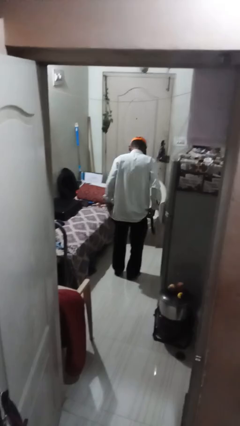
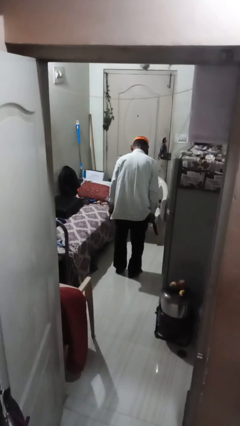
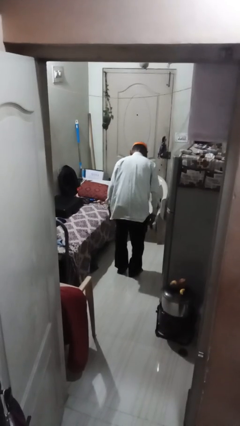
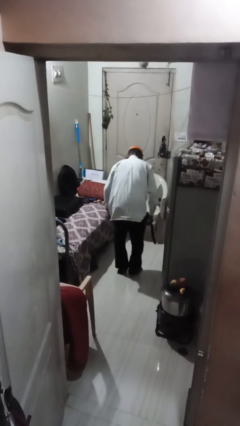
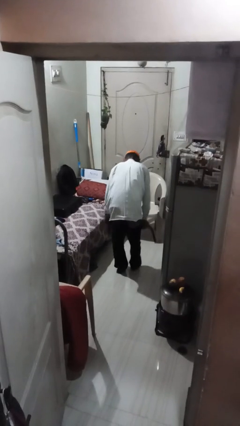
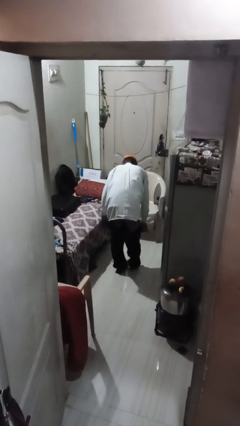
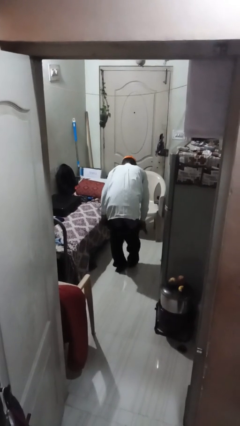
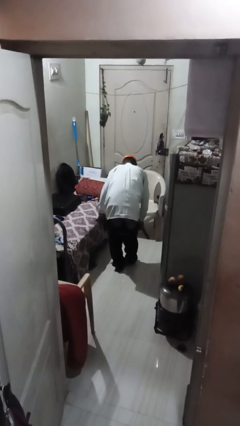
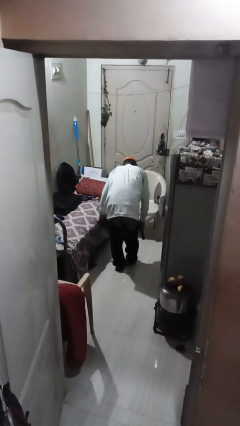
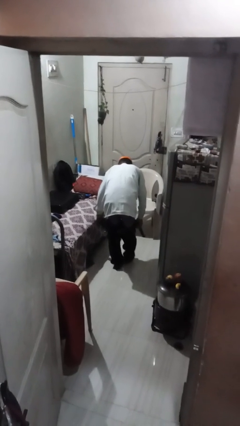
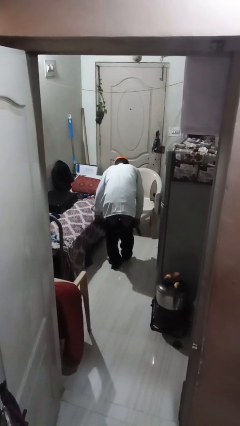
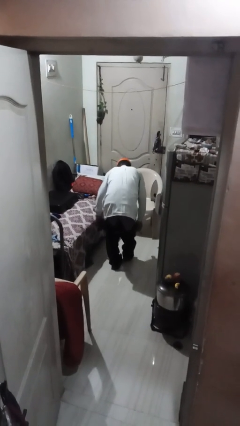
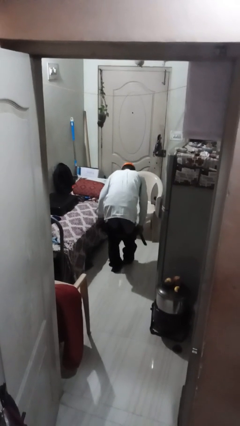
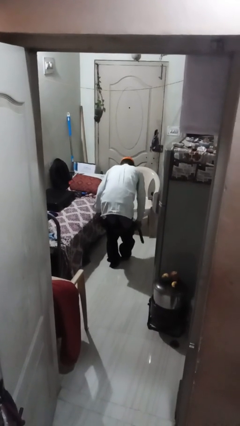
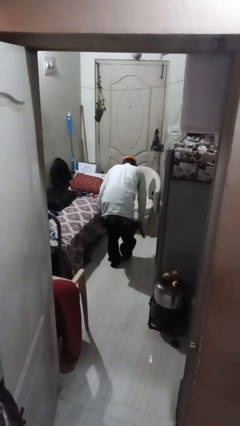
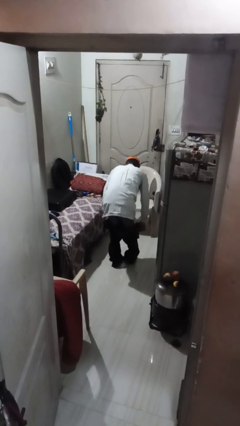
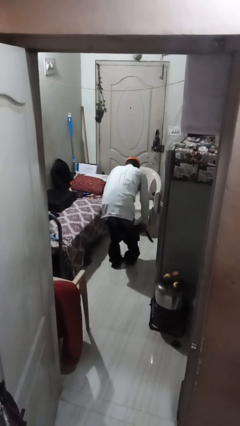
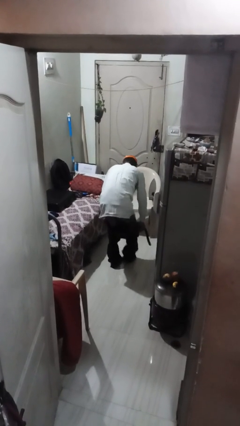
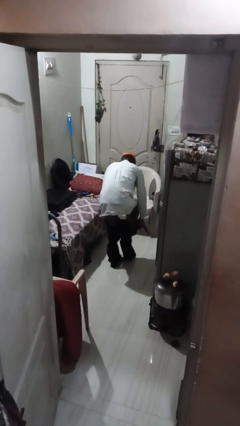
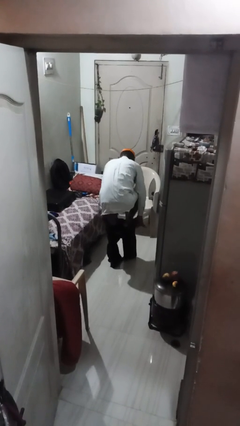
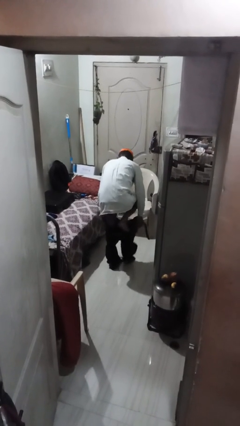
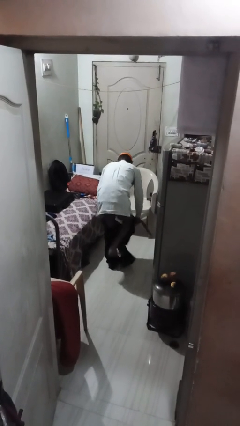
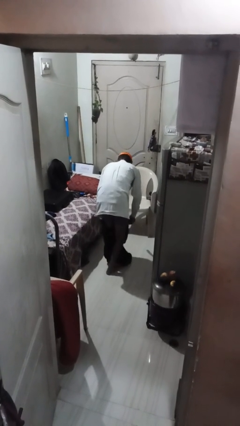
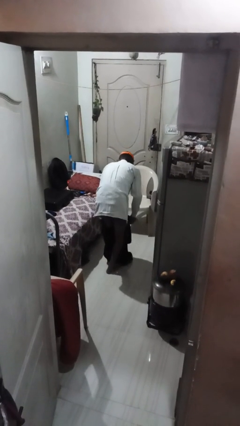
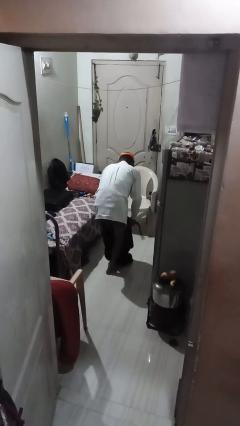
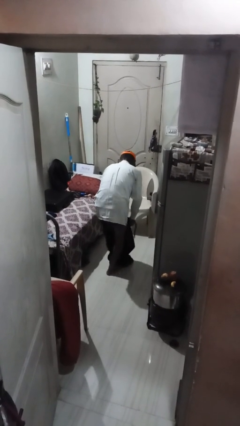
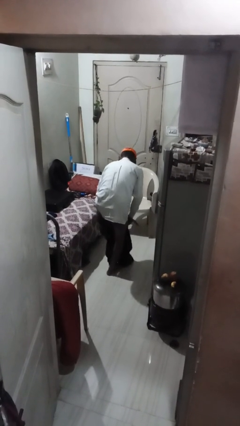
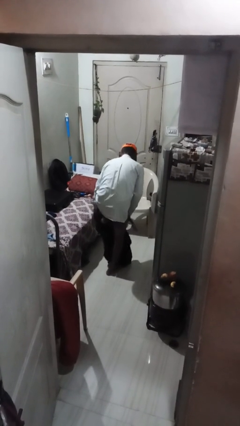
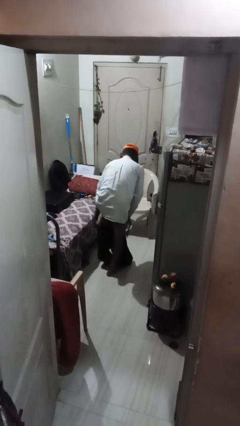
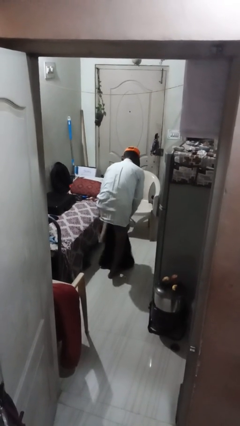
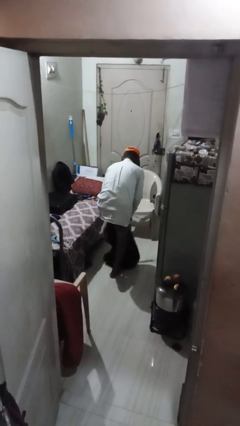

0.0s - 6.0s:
person takes off pants

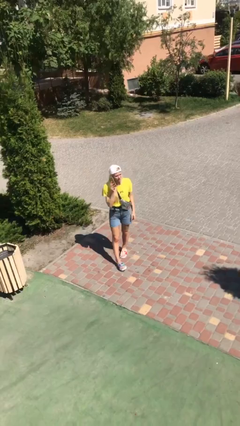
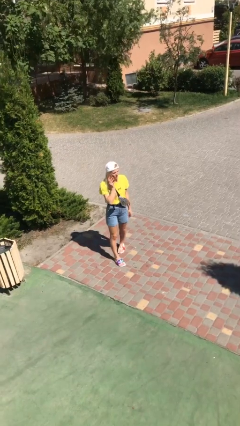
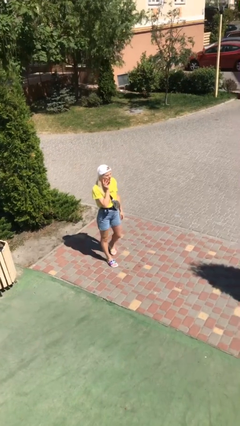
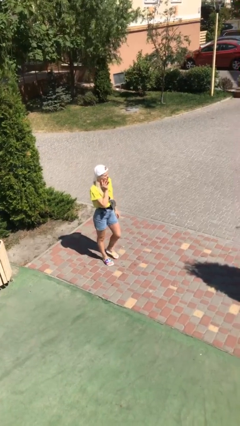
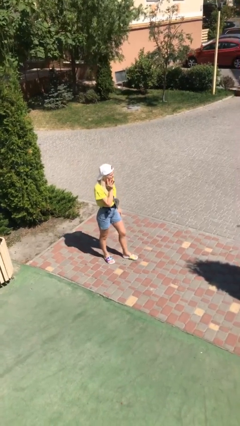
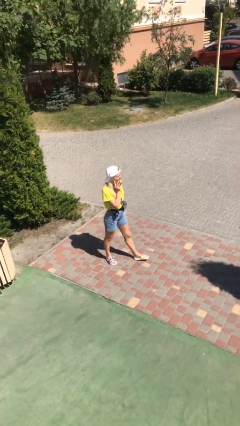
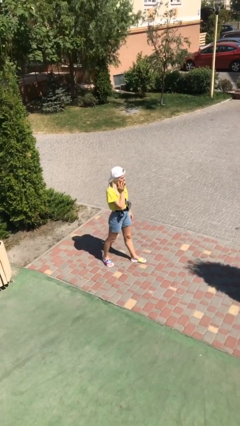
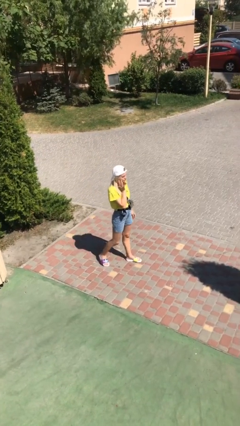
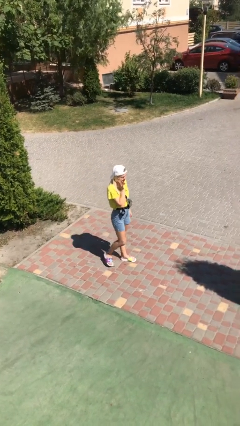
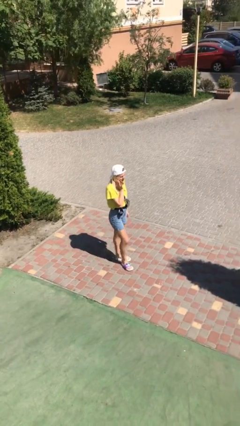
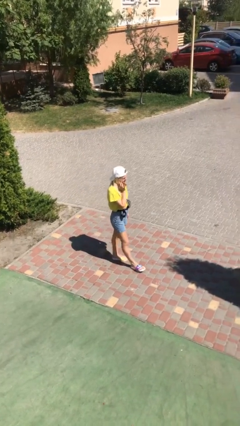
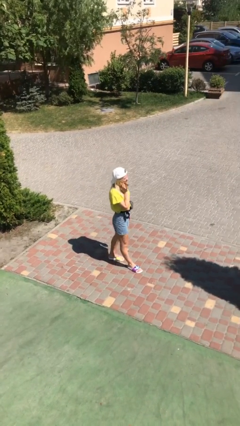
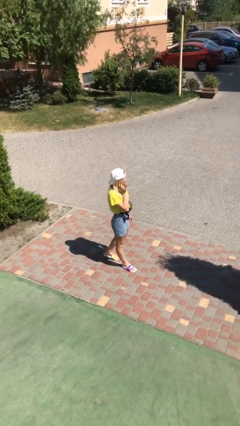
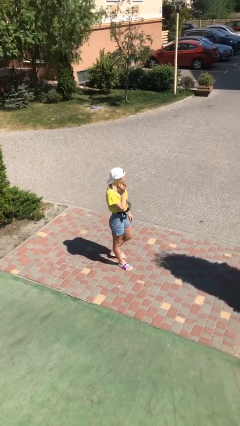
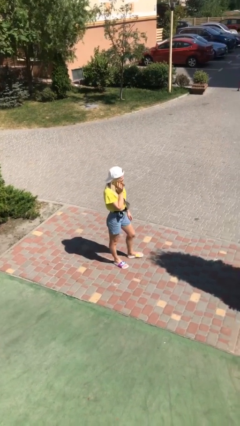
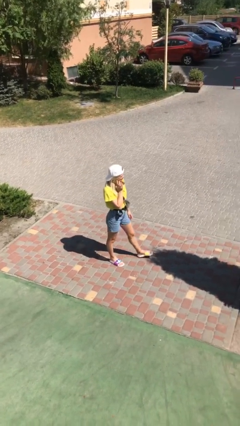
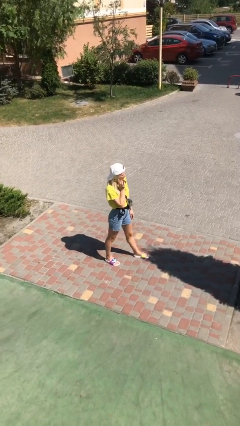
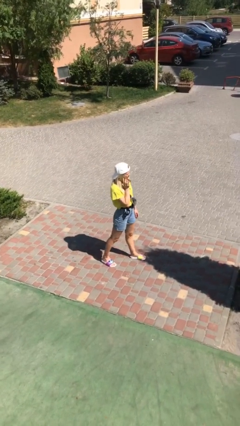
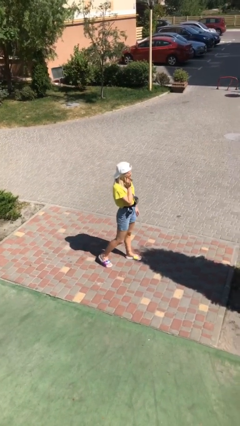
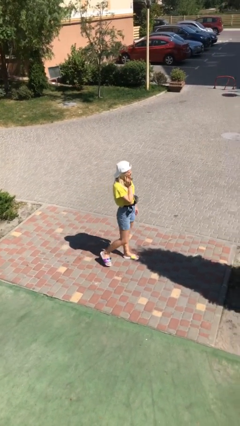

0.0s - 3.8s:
person talks on phone

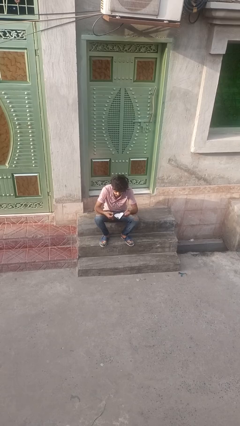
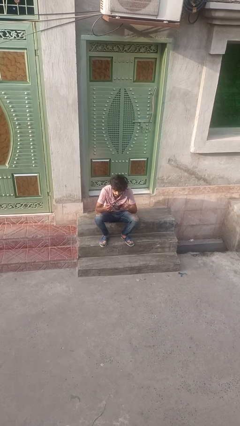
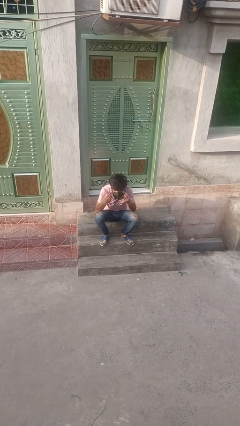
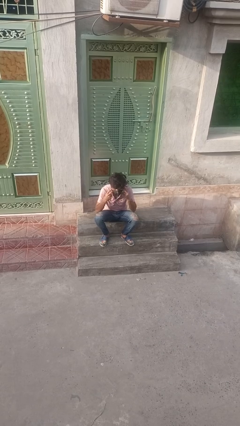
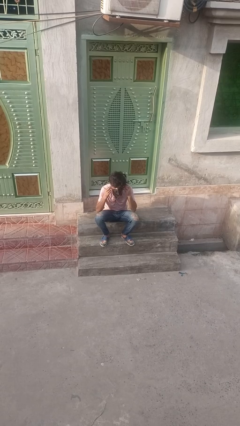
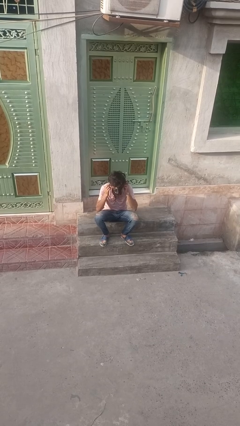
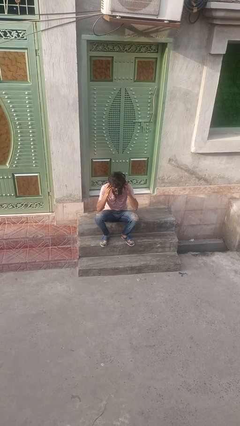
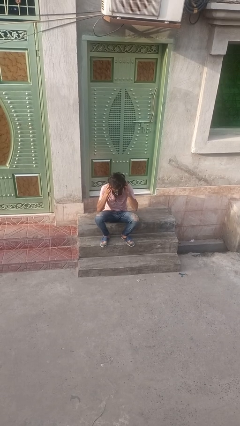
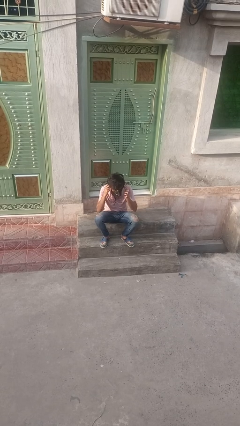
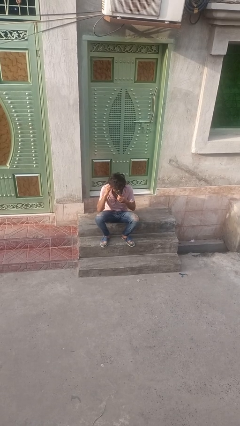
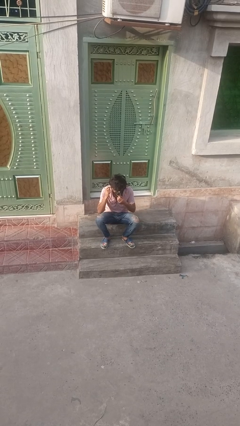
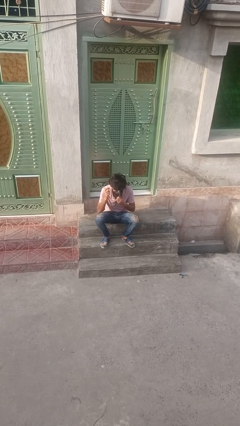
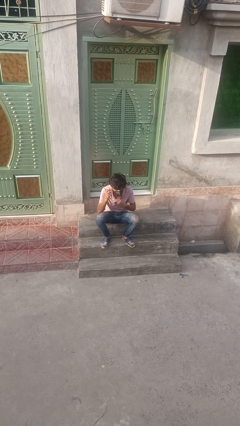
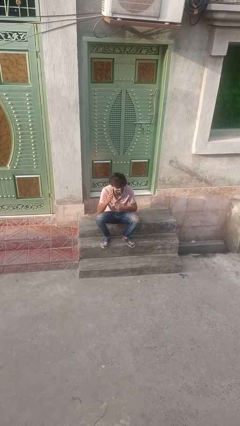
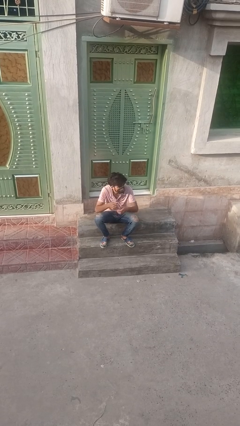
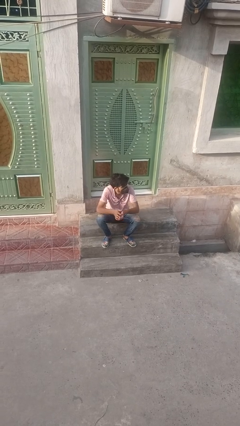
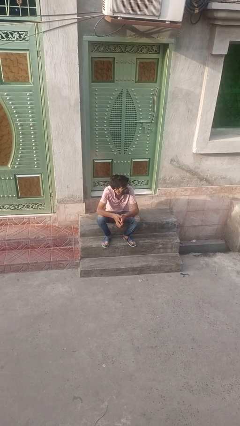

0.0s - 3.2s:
person puts on facemask

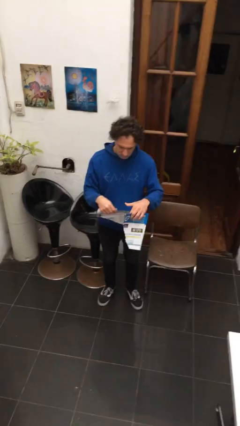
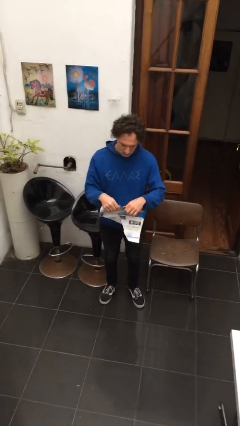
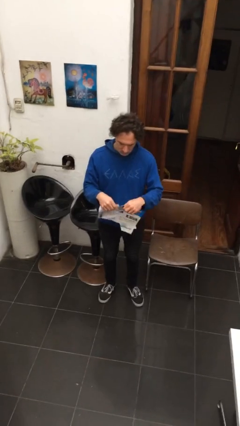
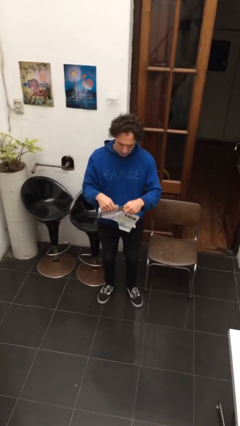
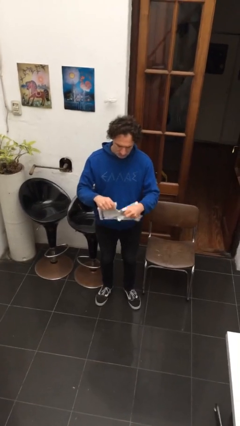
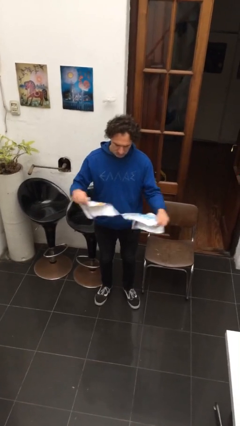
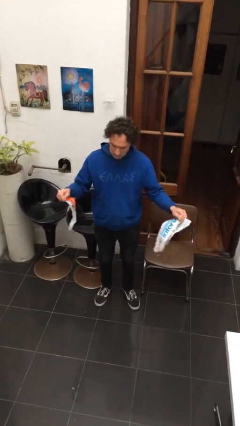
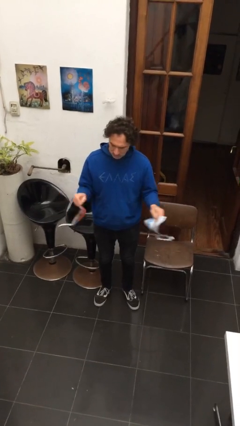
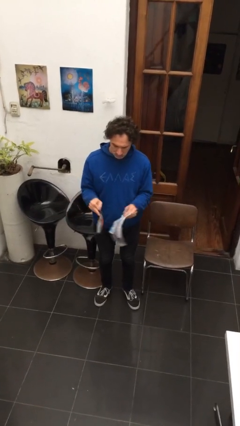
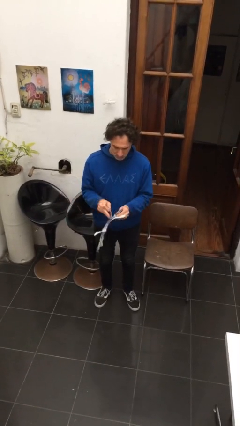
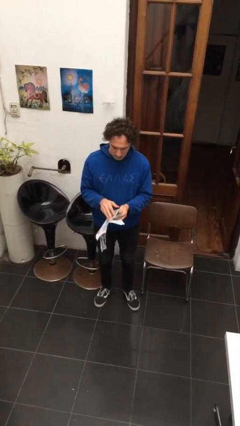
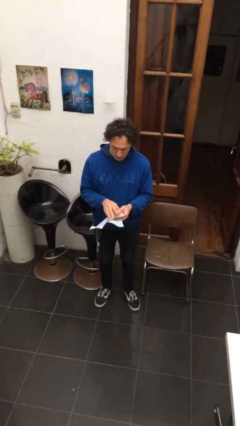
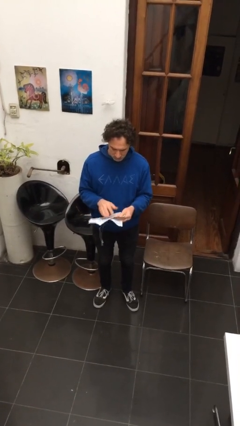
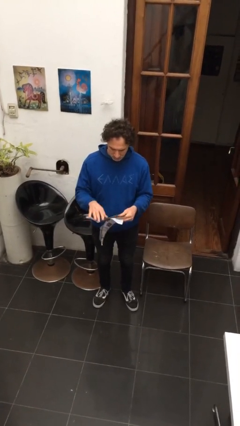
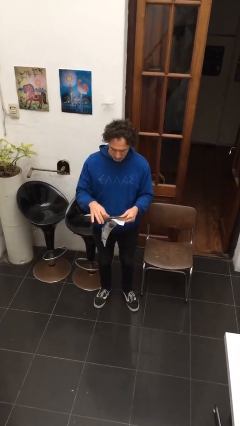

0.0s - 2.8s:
person tears paper

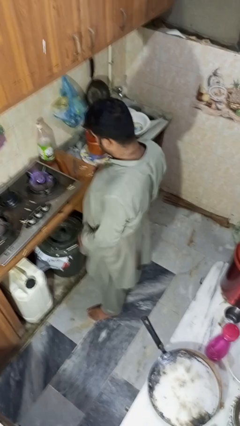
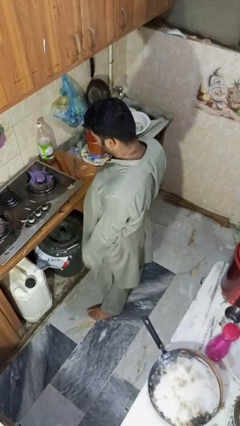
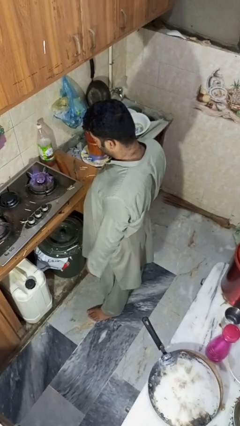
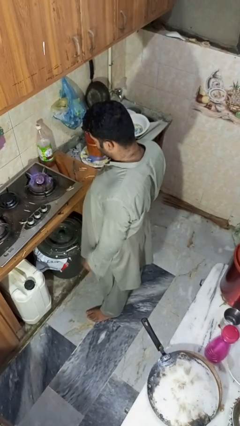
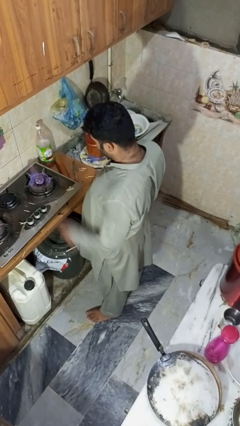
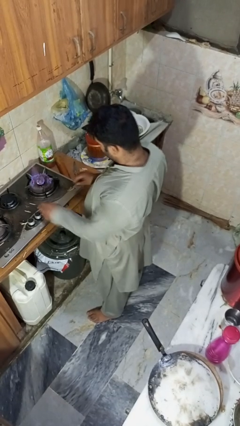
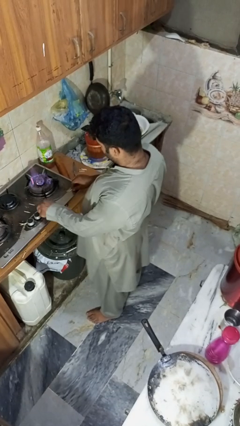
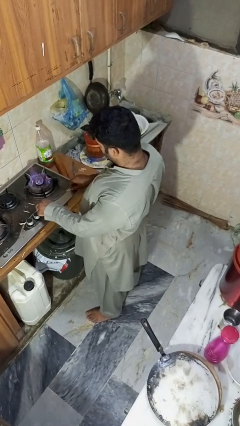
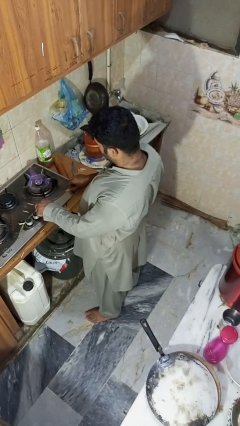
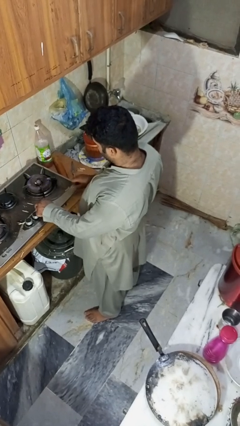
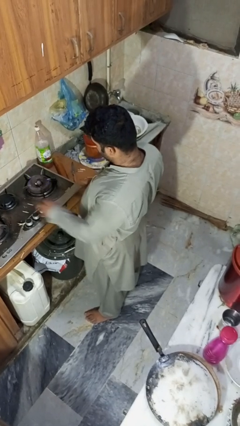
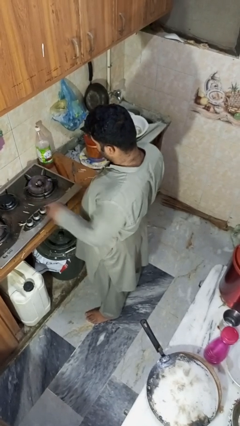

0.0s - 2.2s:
person turns off stovetop
